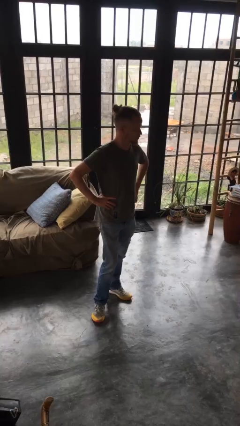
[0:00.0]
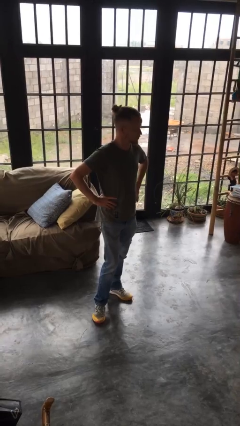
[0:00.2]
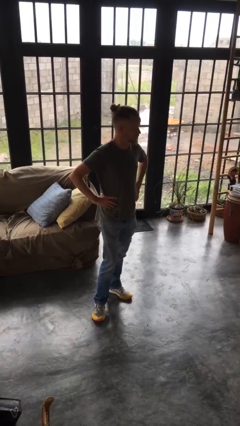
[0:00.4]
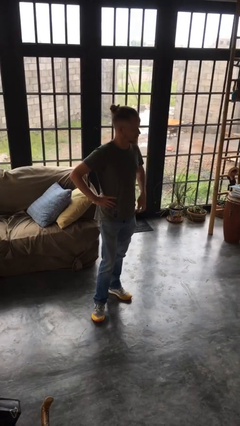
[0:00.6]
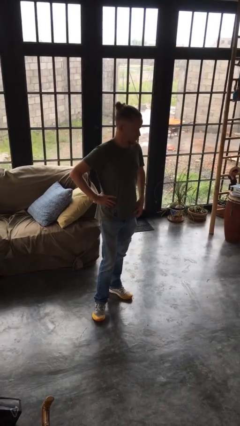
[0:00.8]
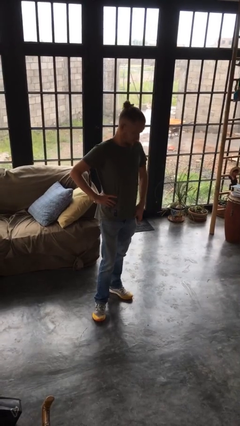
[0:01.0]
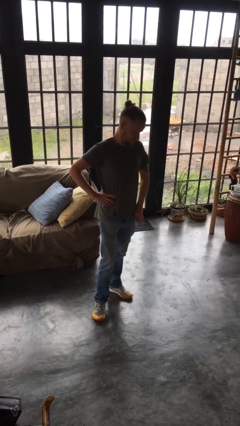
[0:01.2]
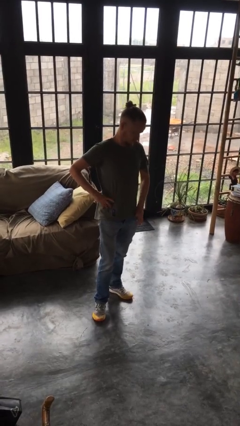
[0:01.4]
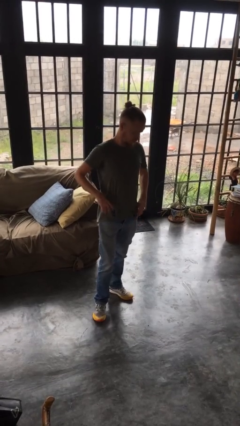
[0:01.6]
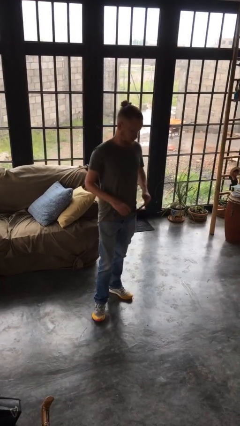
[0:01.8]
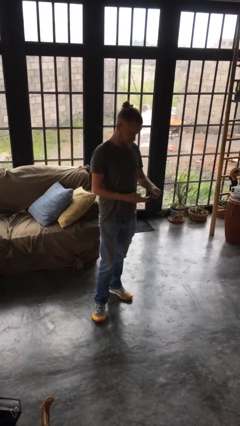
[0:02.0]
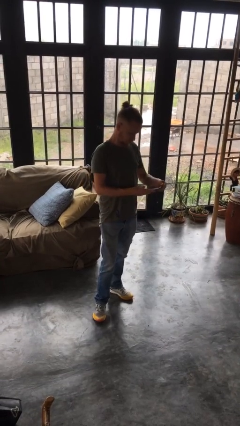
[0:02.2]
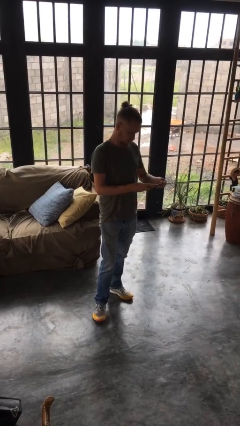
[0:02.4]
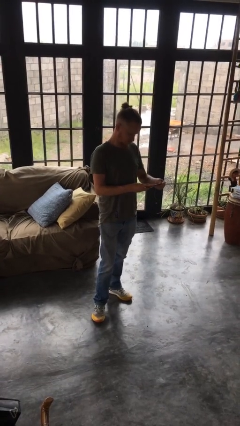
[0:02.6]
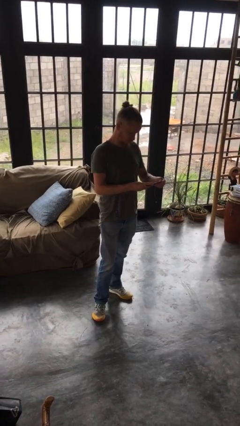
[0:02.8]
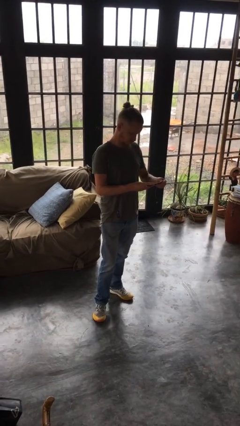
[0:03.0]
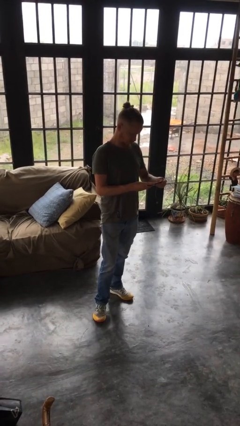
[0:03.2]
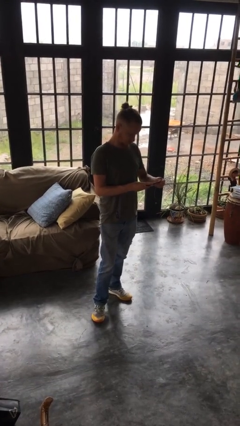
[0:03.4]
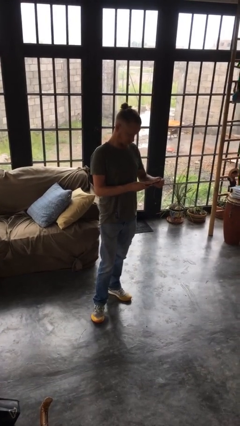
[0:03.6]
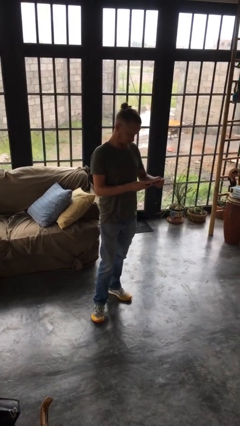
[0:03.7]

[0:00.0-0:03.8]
person takes phone from pocket

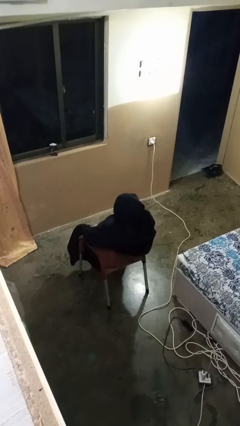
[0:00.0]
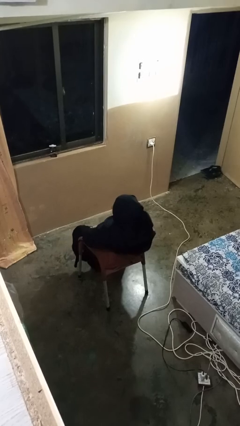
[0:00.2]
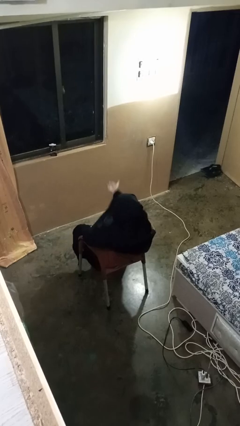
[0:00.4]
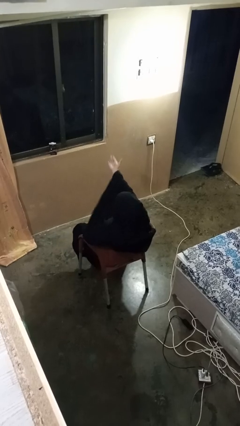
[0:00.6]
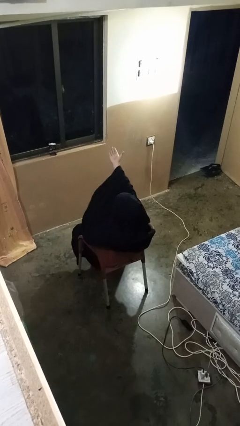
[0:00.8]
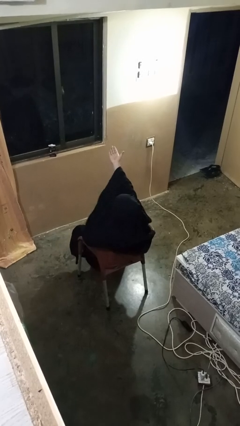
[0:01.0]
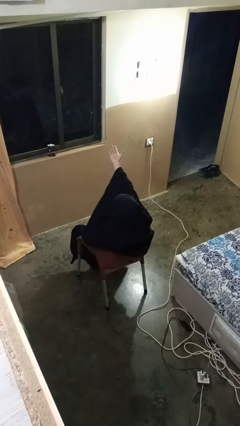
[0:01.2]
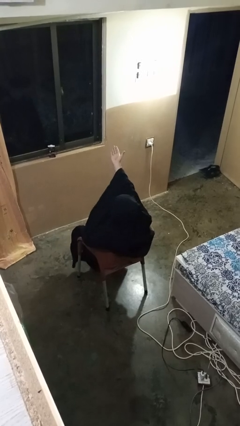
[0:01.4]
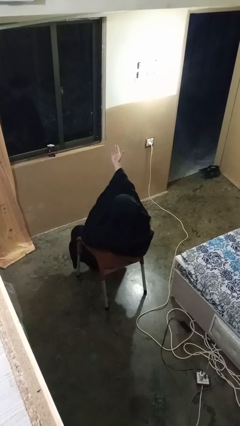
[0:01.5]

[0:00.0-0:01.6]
person gestures swipe up

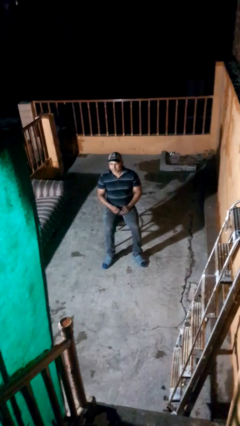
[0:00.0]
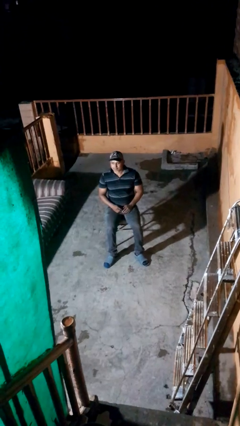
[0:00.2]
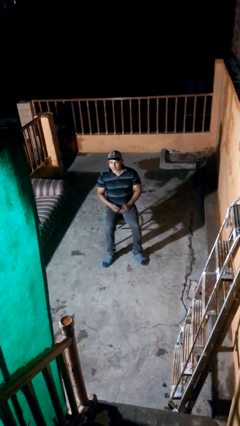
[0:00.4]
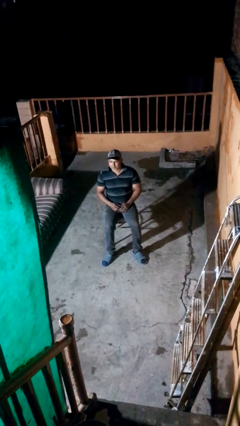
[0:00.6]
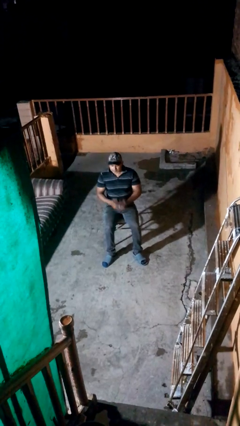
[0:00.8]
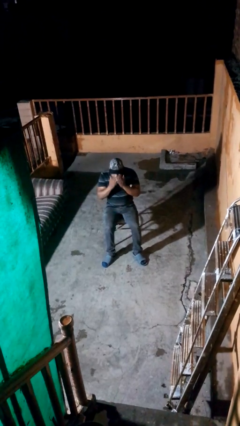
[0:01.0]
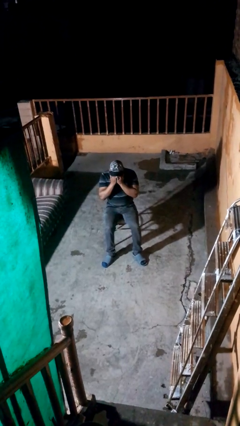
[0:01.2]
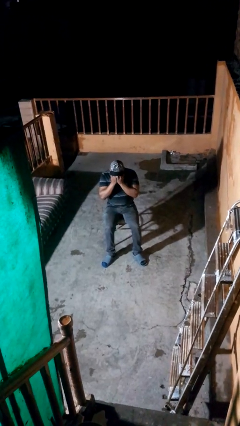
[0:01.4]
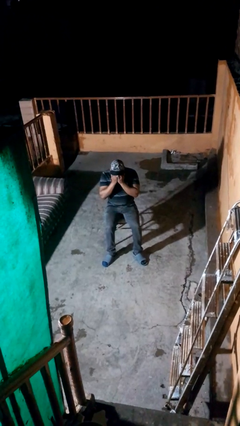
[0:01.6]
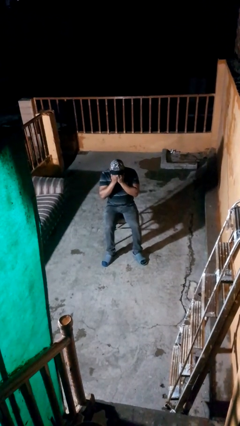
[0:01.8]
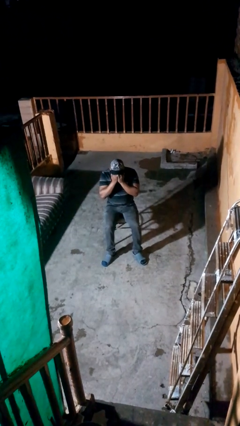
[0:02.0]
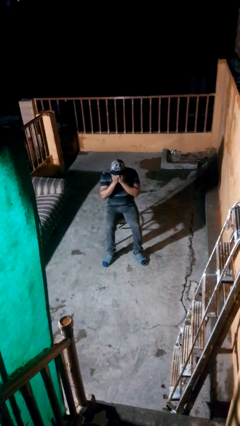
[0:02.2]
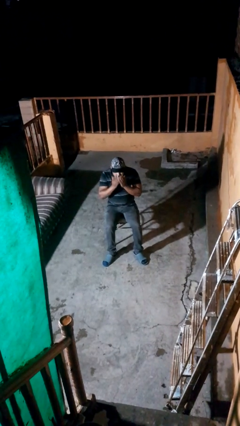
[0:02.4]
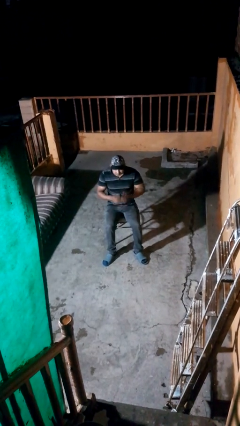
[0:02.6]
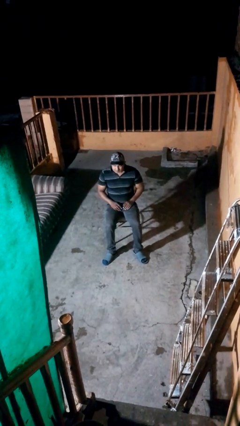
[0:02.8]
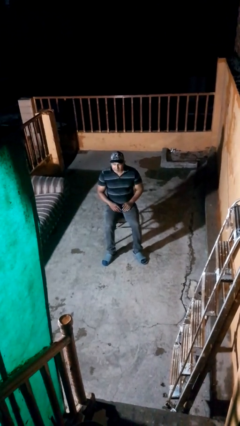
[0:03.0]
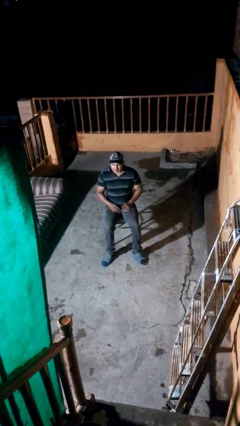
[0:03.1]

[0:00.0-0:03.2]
person covers face with hands

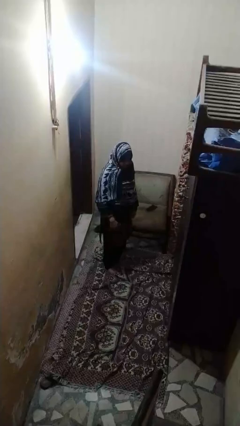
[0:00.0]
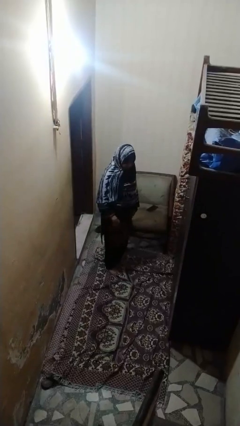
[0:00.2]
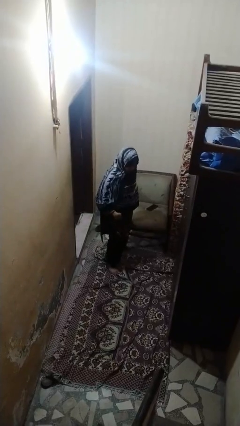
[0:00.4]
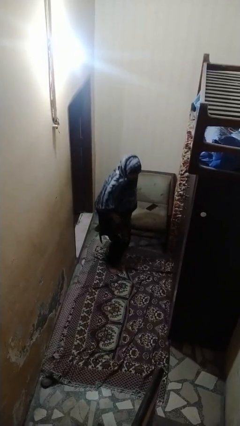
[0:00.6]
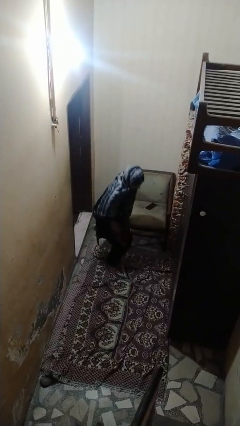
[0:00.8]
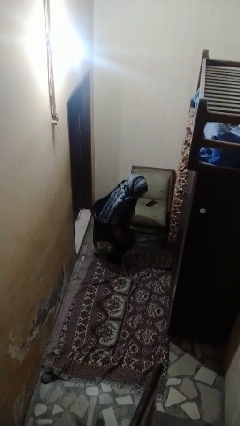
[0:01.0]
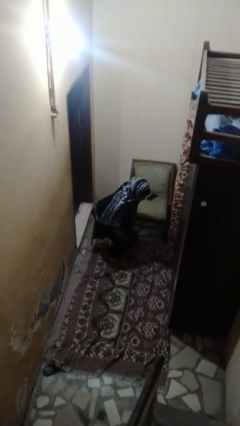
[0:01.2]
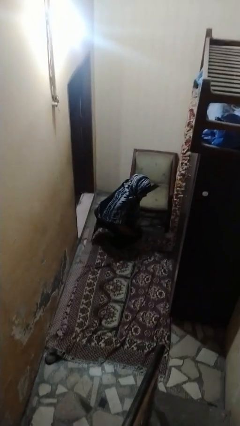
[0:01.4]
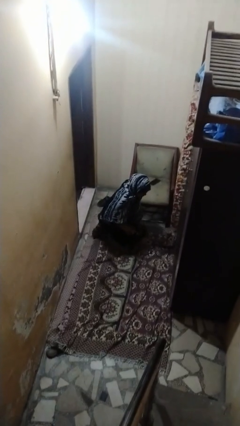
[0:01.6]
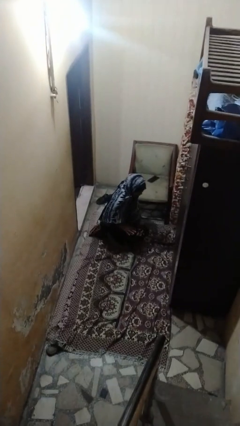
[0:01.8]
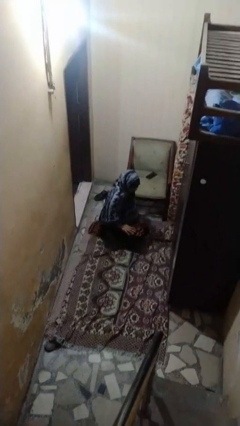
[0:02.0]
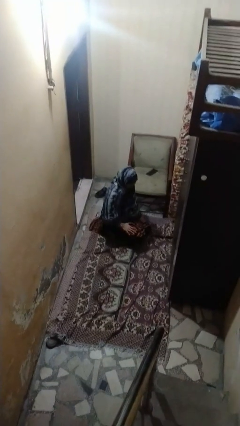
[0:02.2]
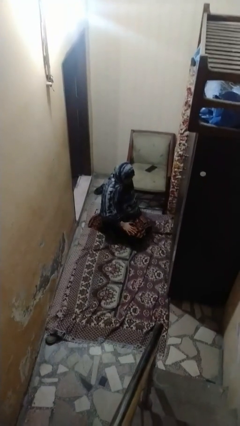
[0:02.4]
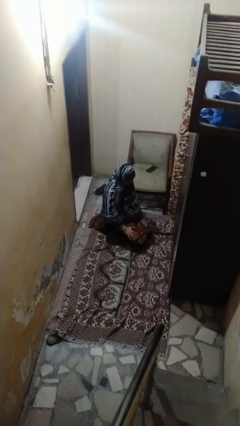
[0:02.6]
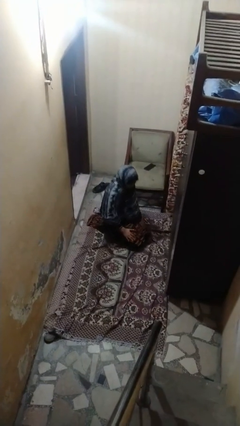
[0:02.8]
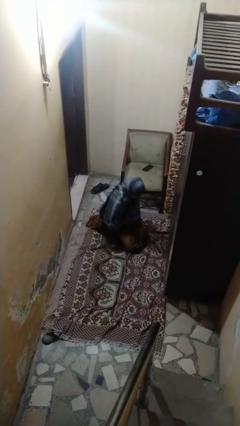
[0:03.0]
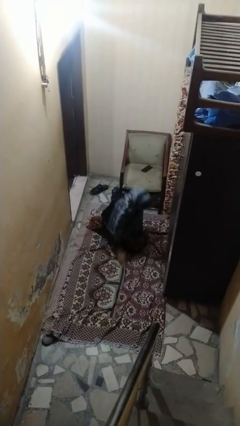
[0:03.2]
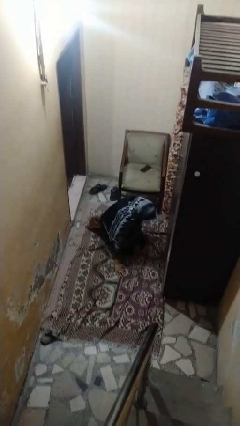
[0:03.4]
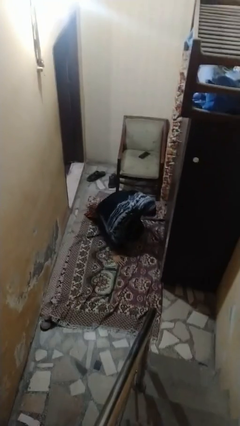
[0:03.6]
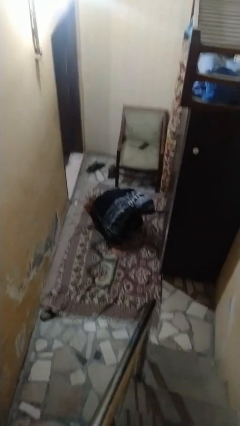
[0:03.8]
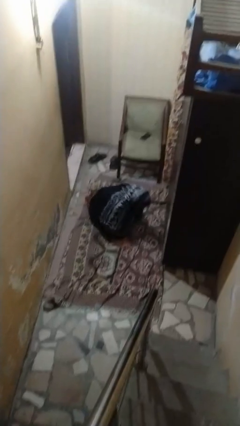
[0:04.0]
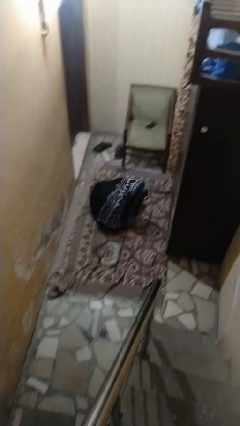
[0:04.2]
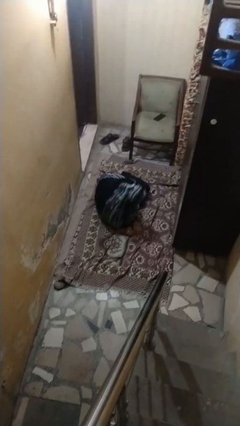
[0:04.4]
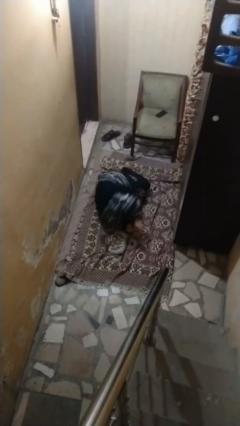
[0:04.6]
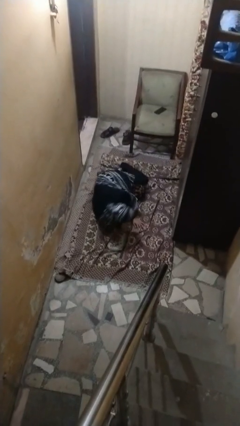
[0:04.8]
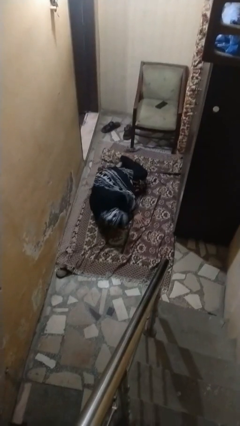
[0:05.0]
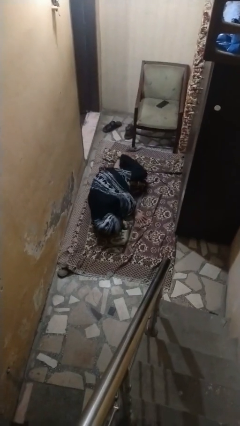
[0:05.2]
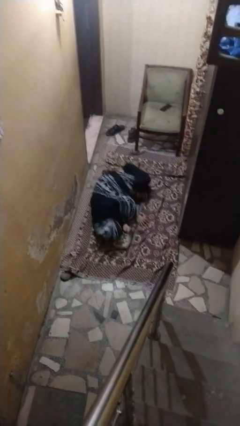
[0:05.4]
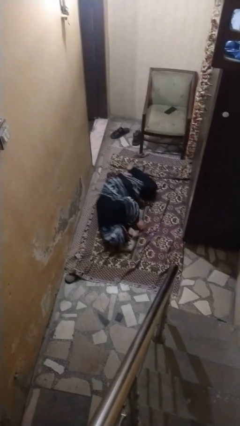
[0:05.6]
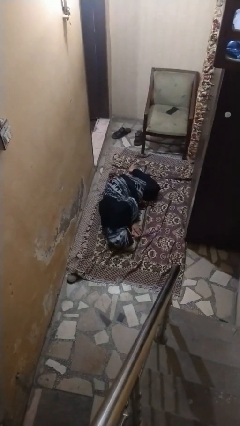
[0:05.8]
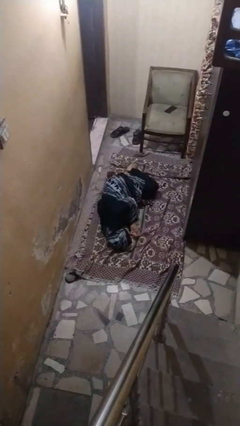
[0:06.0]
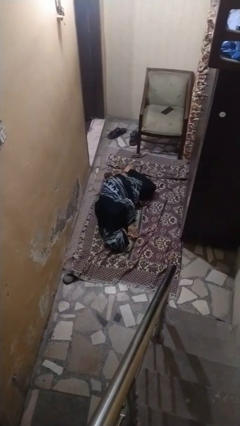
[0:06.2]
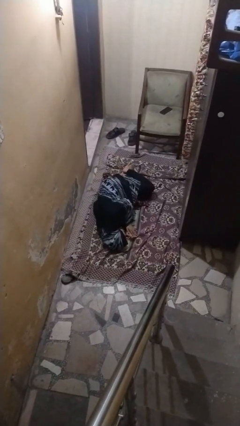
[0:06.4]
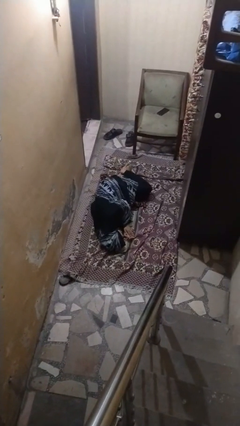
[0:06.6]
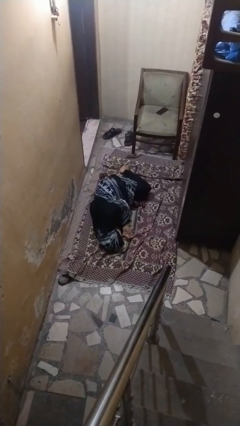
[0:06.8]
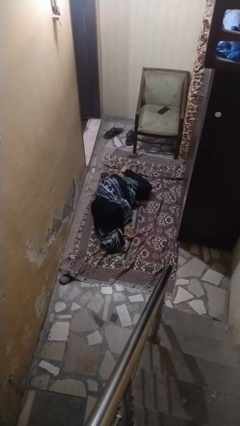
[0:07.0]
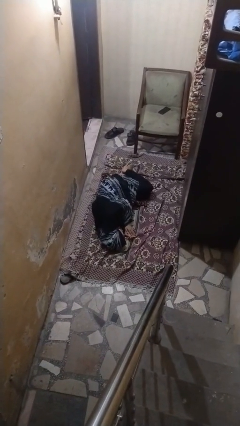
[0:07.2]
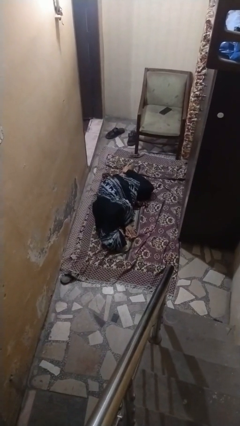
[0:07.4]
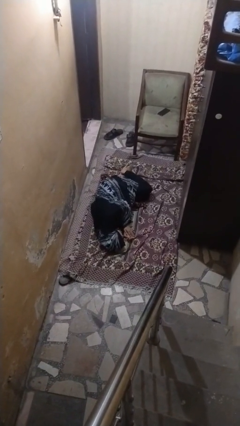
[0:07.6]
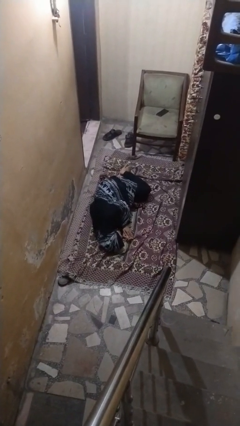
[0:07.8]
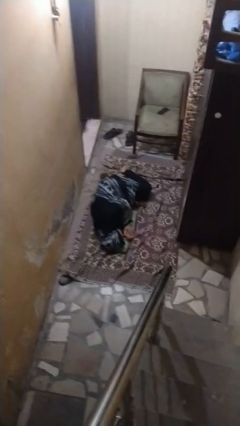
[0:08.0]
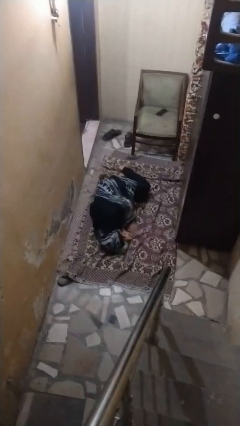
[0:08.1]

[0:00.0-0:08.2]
person falls while standing

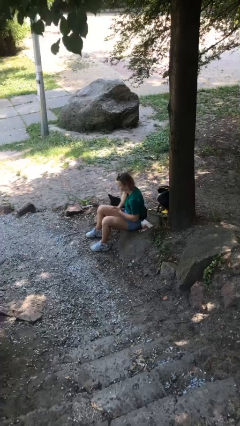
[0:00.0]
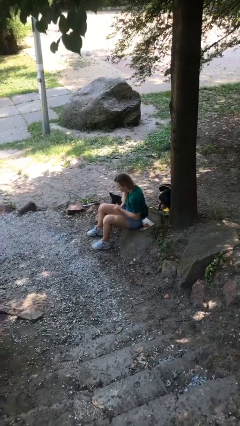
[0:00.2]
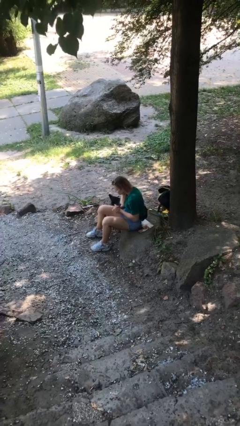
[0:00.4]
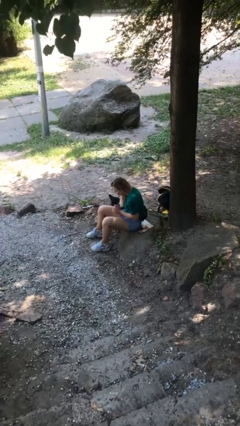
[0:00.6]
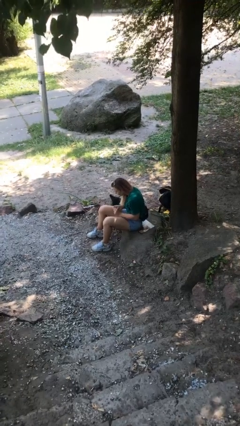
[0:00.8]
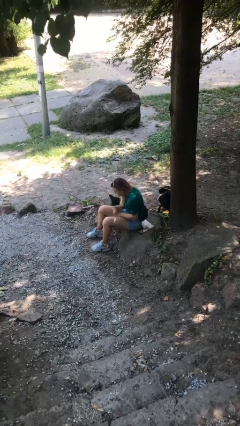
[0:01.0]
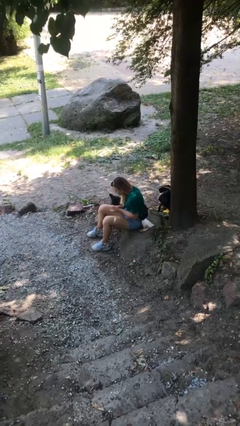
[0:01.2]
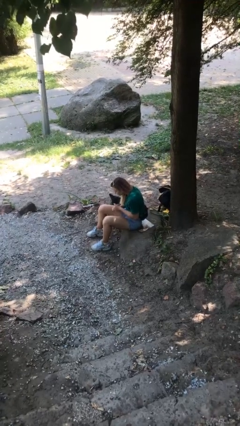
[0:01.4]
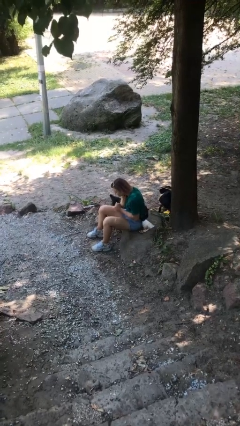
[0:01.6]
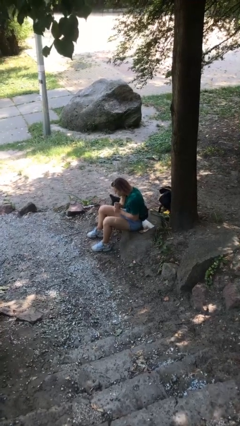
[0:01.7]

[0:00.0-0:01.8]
person looks at hands in lap
